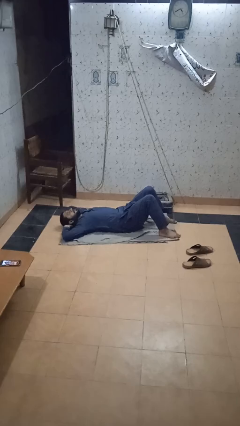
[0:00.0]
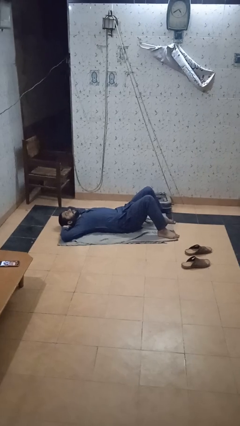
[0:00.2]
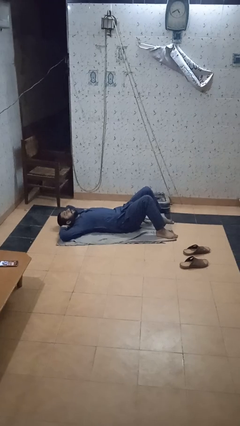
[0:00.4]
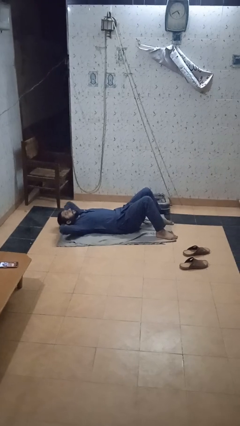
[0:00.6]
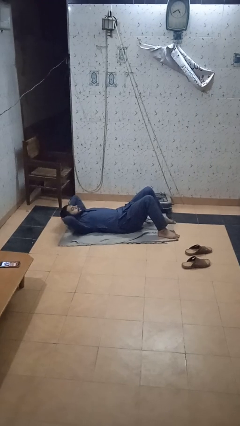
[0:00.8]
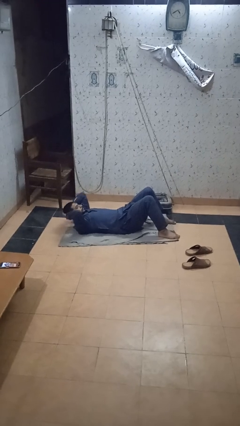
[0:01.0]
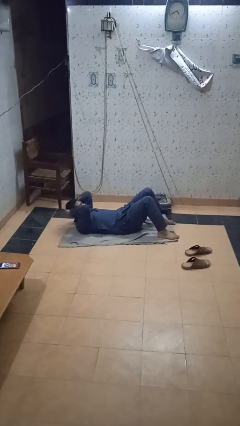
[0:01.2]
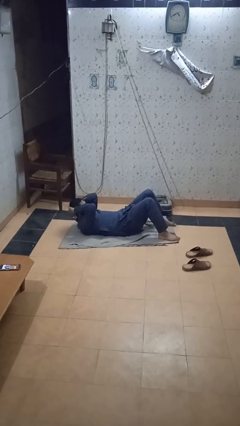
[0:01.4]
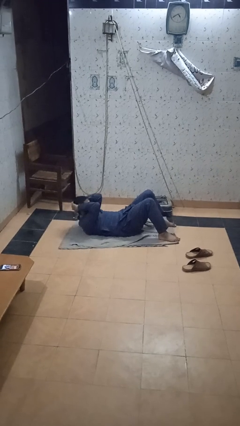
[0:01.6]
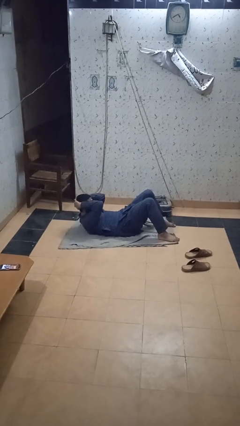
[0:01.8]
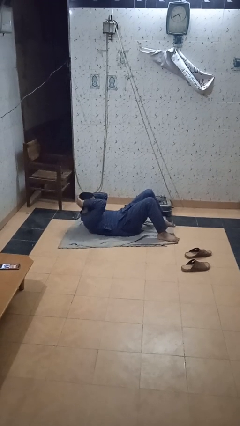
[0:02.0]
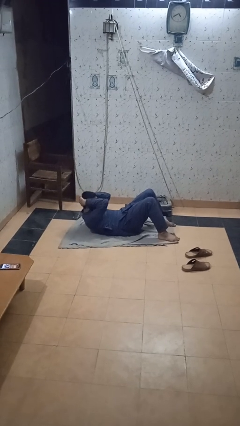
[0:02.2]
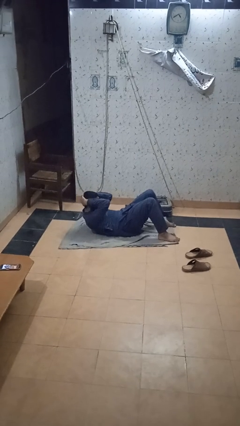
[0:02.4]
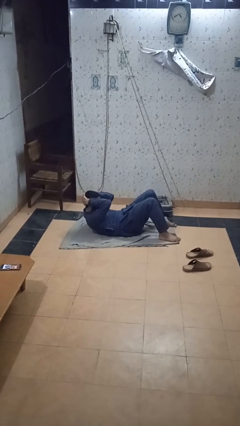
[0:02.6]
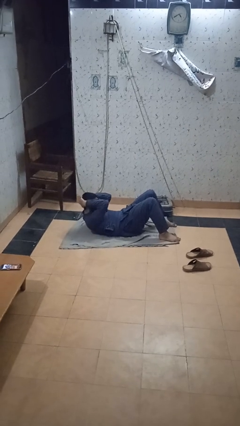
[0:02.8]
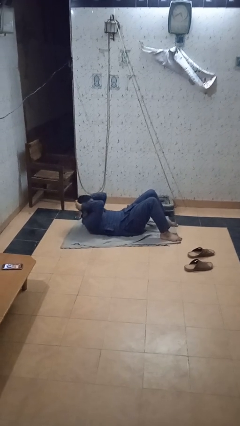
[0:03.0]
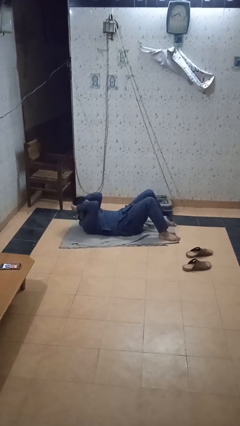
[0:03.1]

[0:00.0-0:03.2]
person exercises with situp

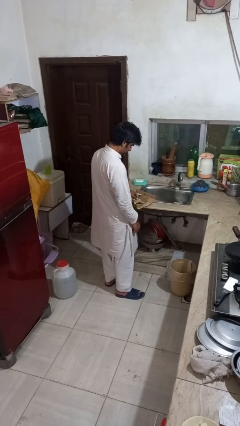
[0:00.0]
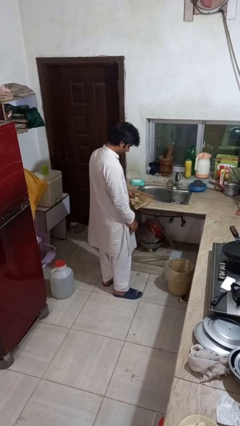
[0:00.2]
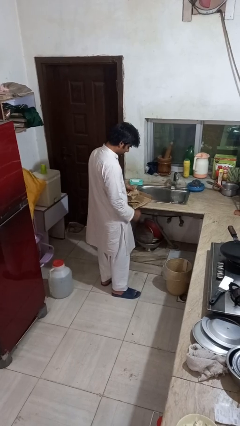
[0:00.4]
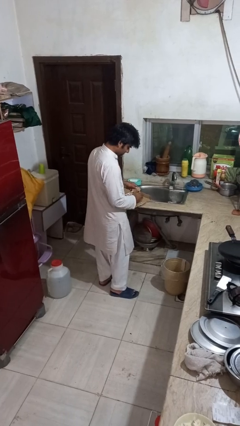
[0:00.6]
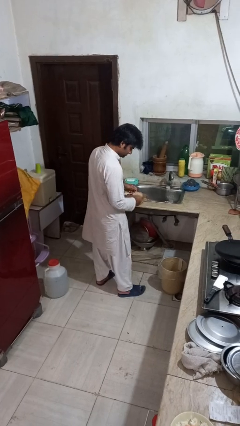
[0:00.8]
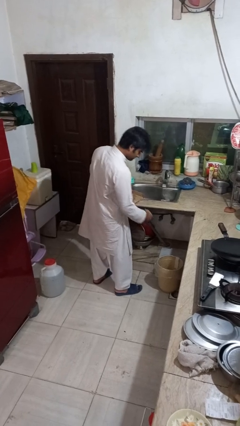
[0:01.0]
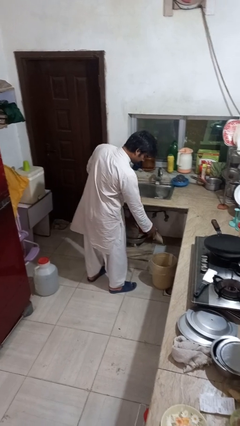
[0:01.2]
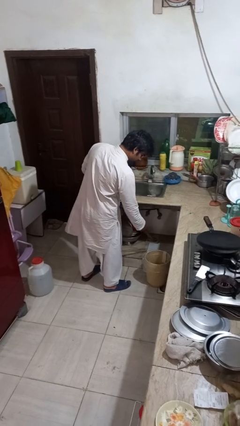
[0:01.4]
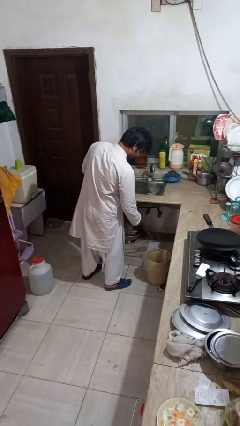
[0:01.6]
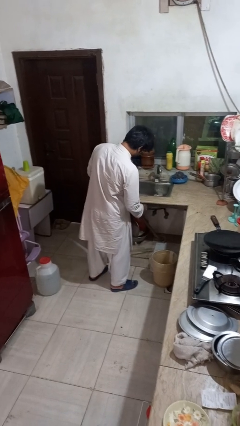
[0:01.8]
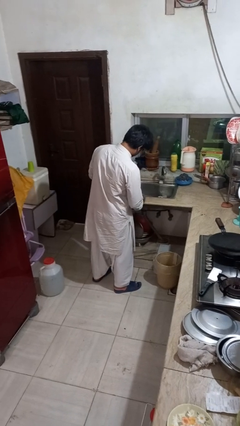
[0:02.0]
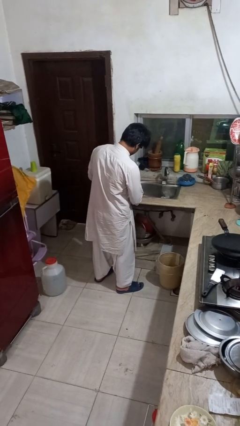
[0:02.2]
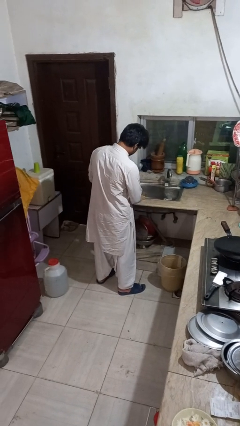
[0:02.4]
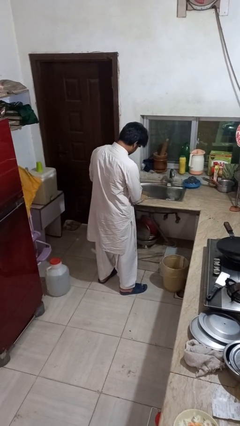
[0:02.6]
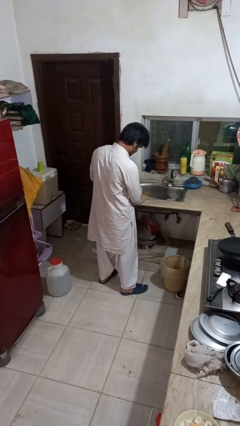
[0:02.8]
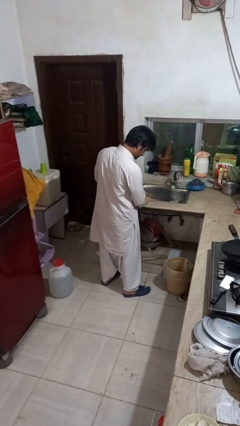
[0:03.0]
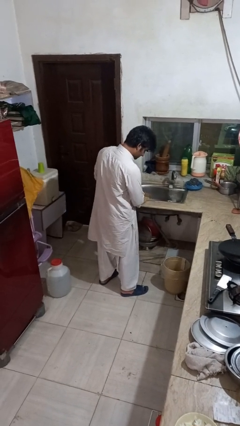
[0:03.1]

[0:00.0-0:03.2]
person discards trash

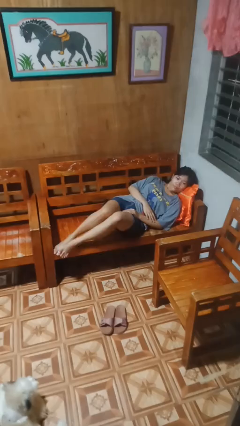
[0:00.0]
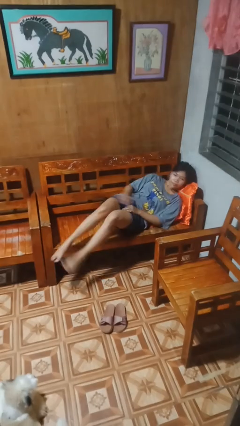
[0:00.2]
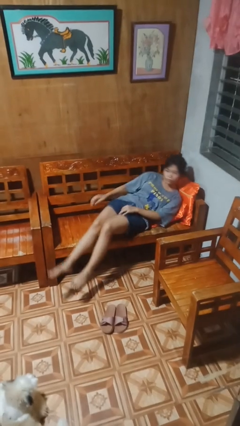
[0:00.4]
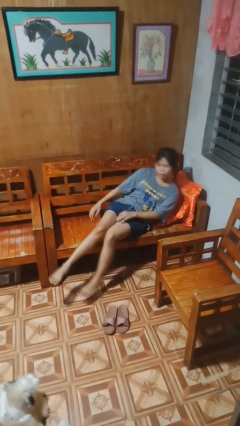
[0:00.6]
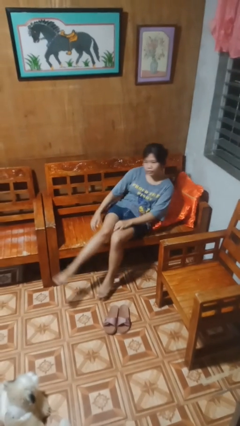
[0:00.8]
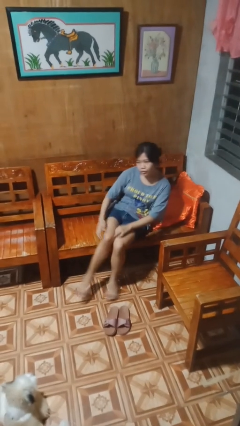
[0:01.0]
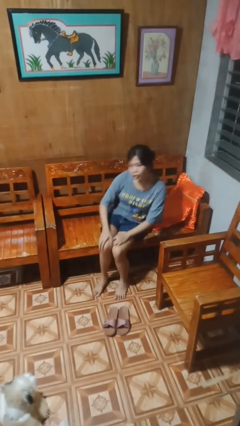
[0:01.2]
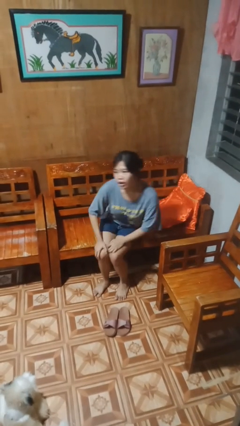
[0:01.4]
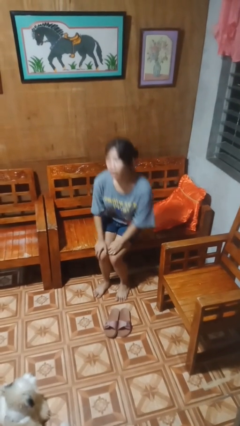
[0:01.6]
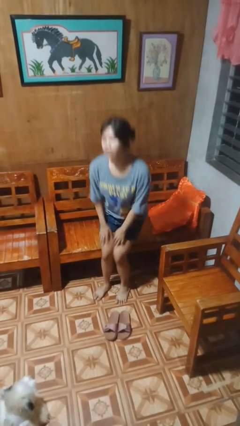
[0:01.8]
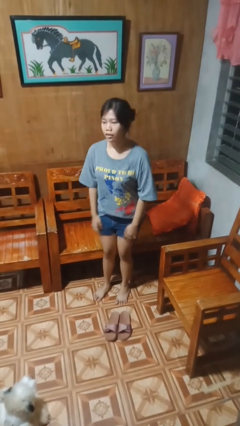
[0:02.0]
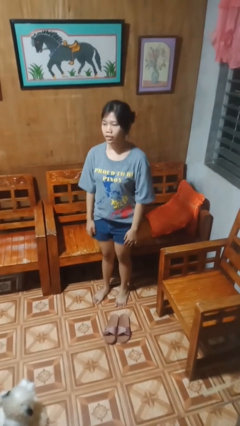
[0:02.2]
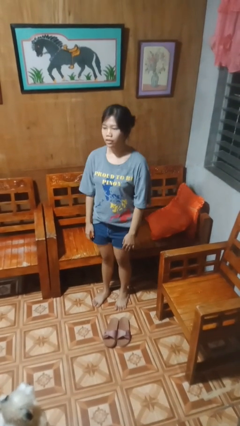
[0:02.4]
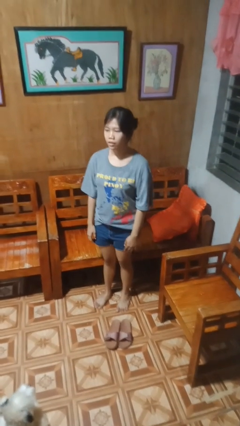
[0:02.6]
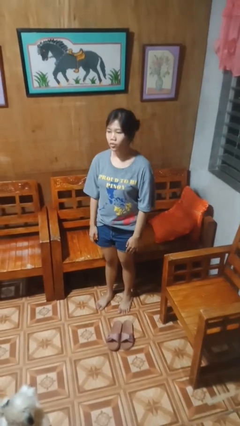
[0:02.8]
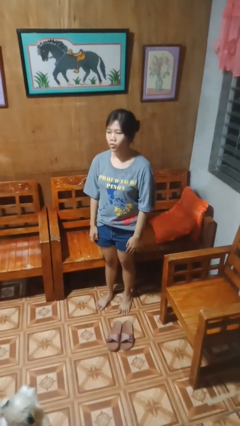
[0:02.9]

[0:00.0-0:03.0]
person stands up

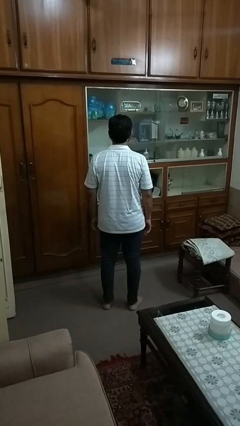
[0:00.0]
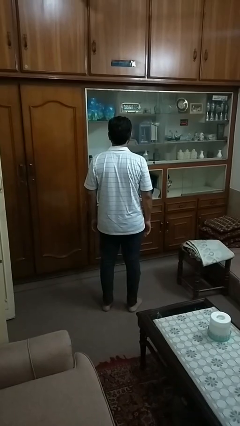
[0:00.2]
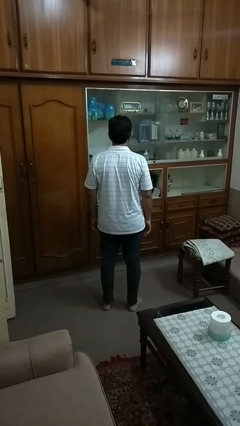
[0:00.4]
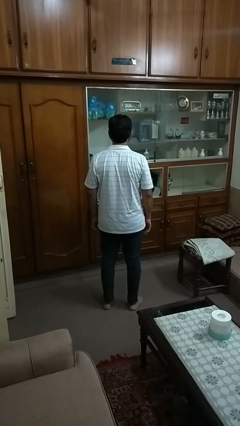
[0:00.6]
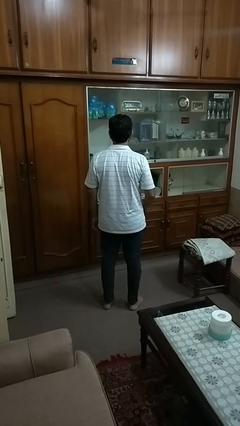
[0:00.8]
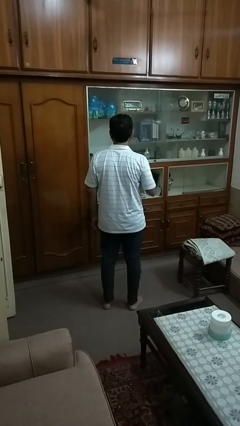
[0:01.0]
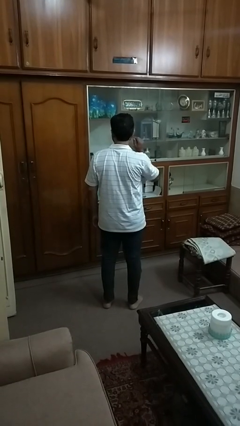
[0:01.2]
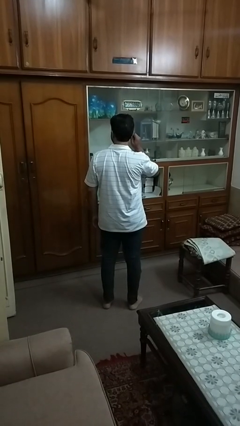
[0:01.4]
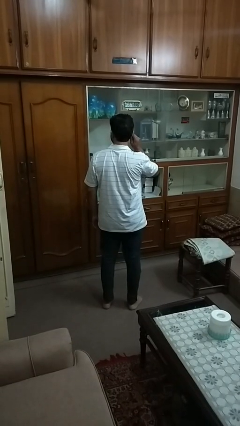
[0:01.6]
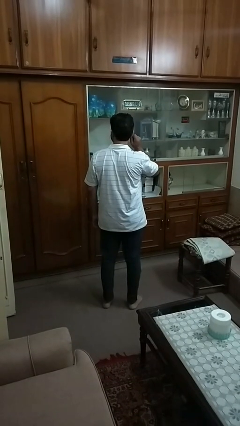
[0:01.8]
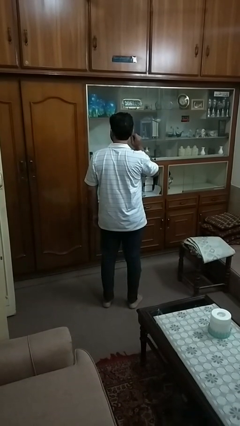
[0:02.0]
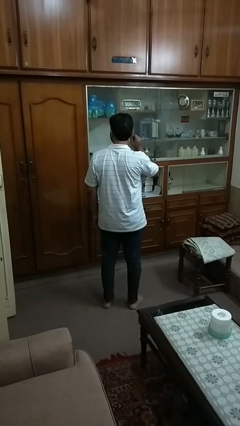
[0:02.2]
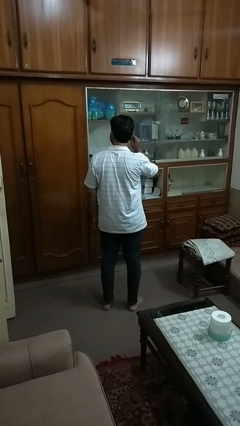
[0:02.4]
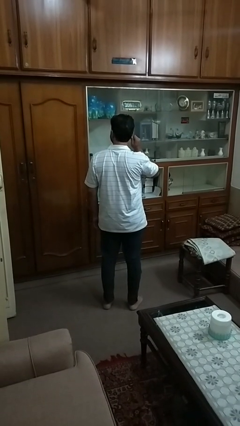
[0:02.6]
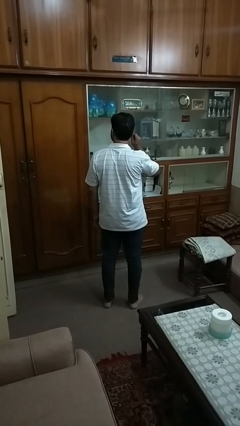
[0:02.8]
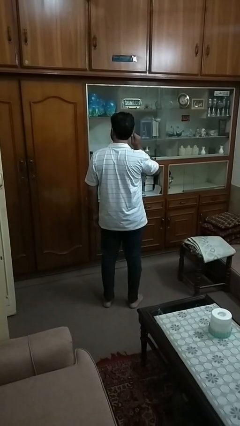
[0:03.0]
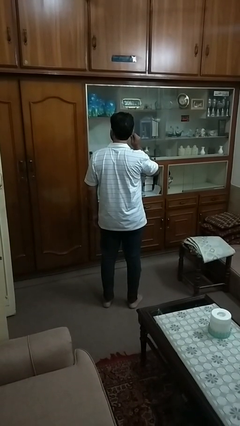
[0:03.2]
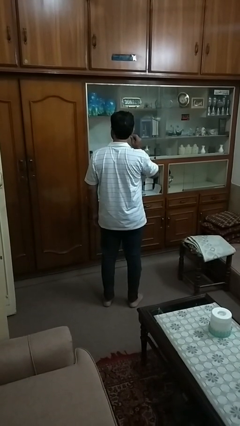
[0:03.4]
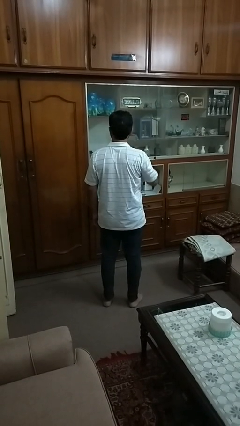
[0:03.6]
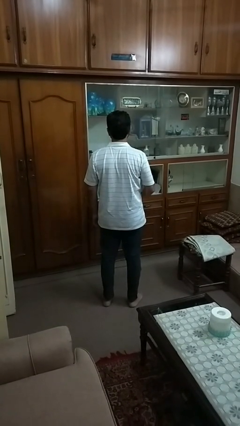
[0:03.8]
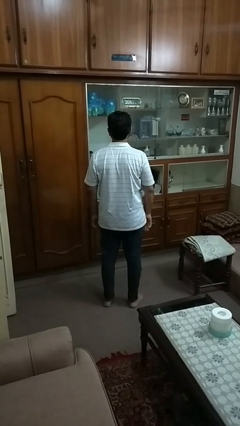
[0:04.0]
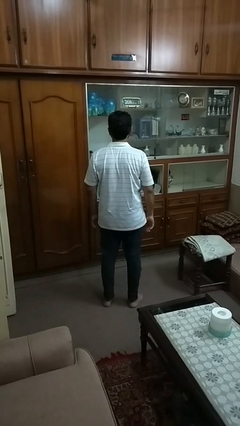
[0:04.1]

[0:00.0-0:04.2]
person touches earlobe

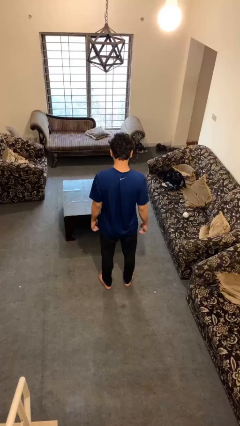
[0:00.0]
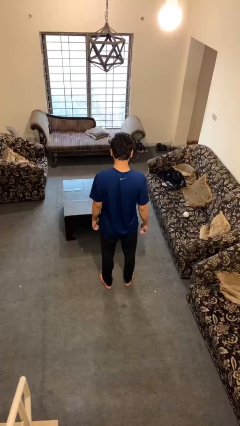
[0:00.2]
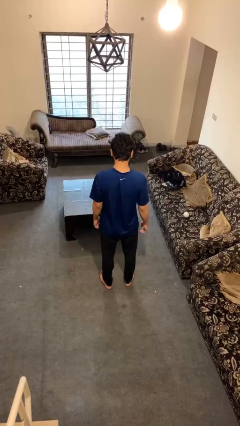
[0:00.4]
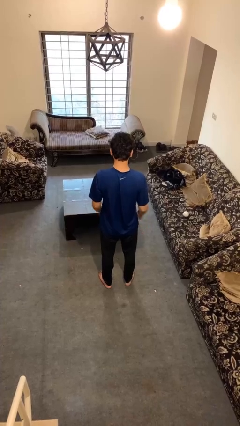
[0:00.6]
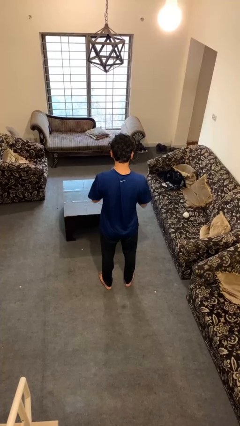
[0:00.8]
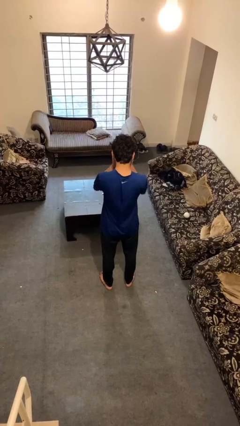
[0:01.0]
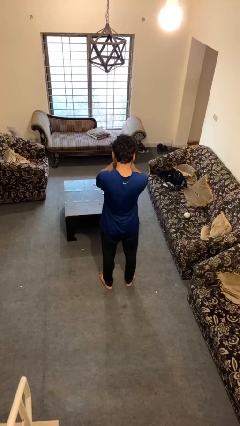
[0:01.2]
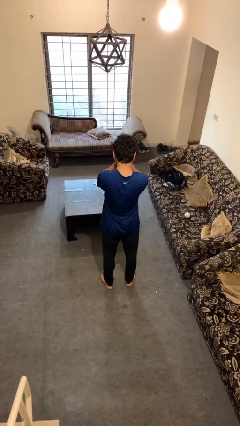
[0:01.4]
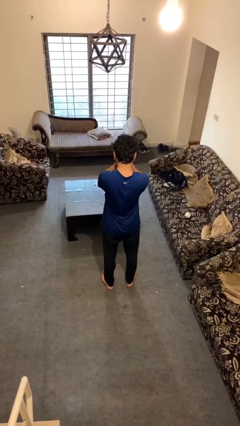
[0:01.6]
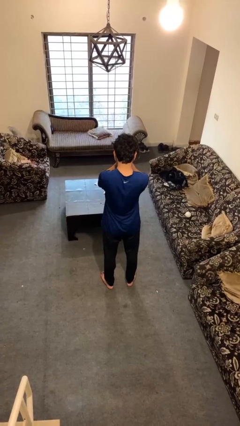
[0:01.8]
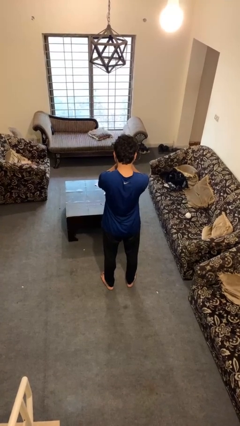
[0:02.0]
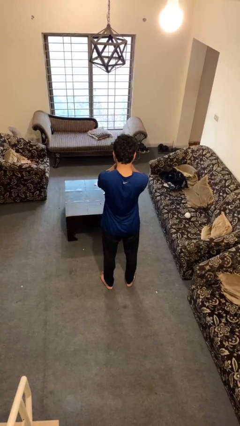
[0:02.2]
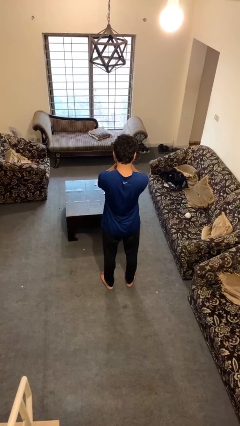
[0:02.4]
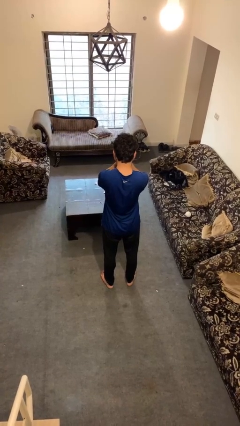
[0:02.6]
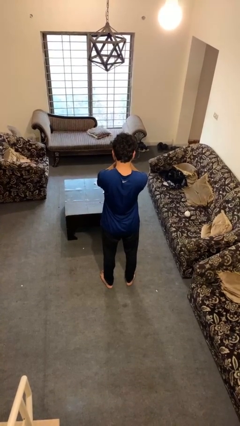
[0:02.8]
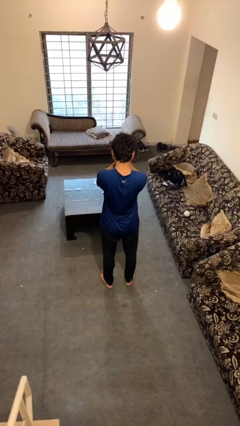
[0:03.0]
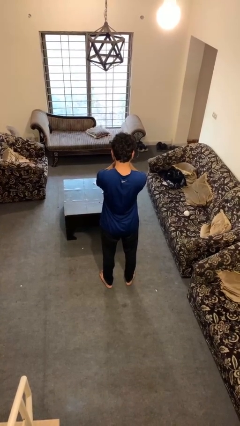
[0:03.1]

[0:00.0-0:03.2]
person covers face with hands

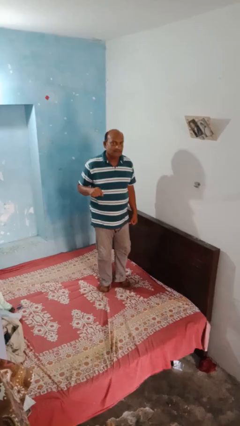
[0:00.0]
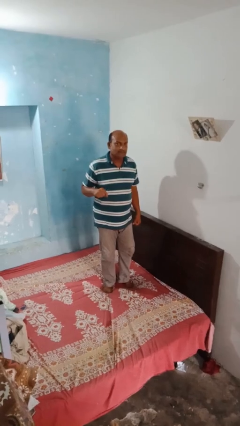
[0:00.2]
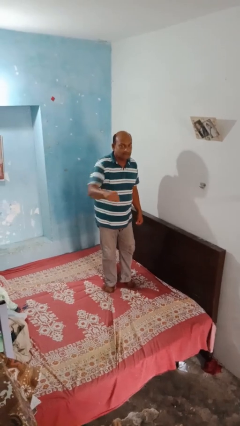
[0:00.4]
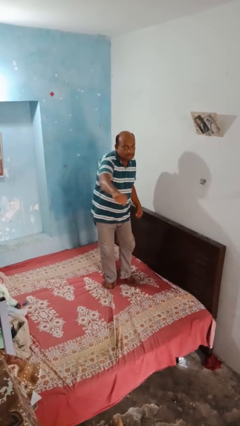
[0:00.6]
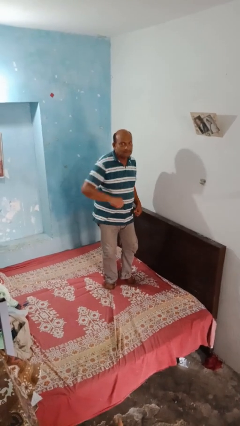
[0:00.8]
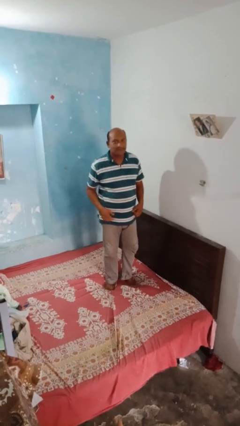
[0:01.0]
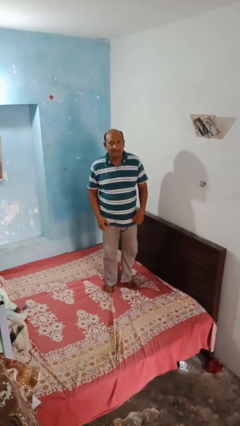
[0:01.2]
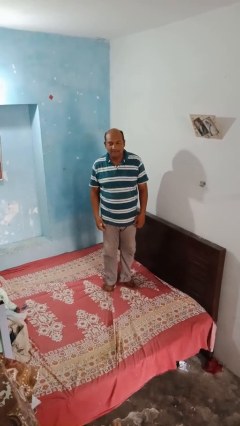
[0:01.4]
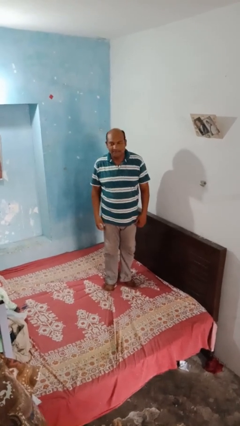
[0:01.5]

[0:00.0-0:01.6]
person karate chop
